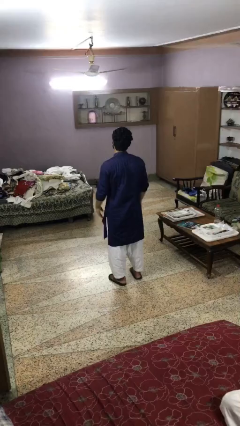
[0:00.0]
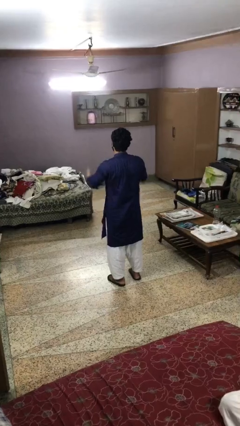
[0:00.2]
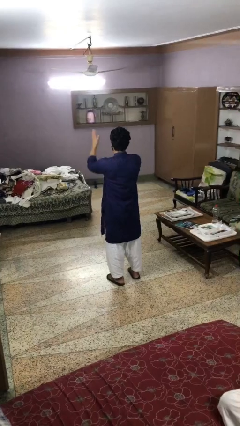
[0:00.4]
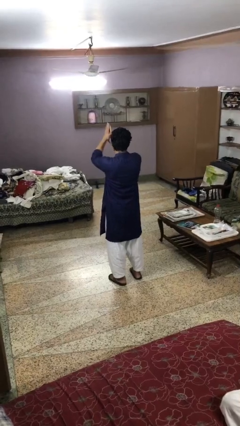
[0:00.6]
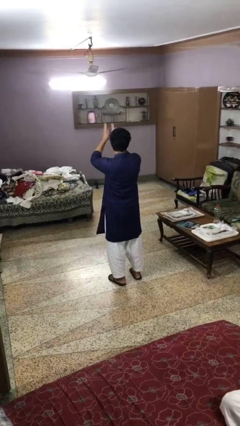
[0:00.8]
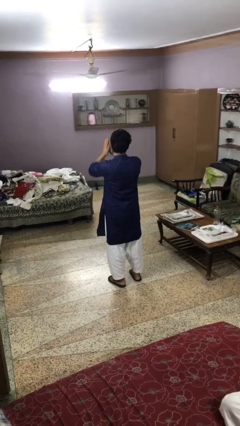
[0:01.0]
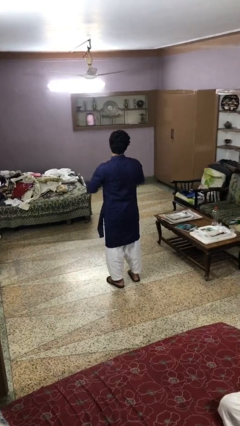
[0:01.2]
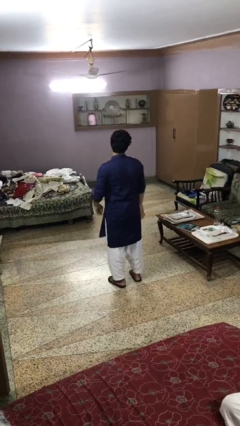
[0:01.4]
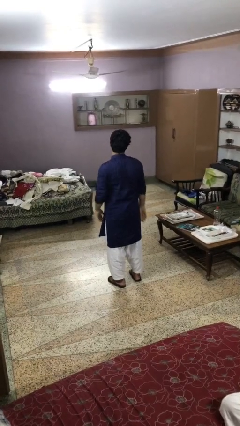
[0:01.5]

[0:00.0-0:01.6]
person claps hands

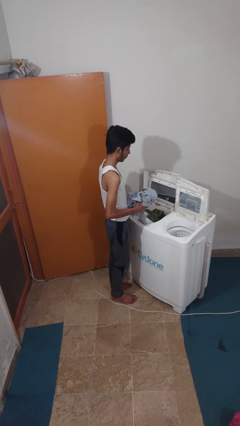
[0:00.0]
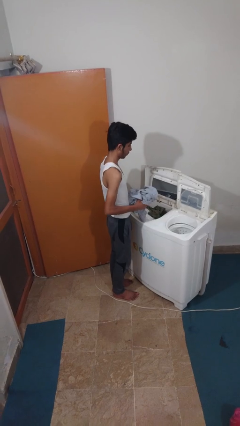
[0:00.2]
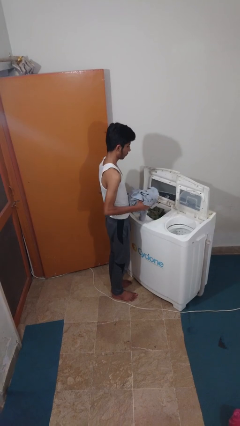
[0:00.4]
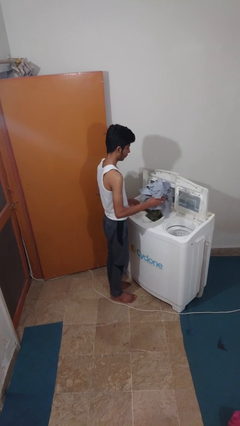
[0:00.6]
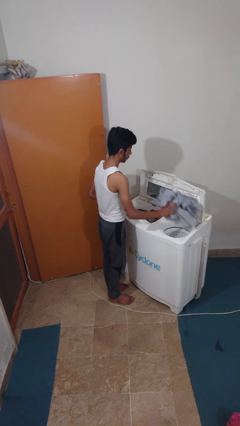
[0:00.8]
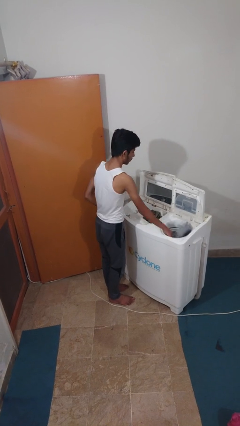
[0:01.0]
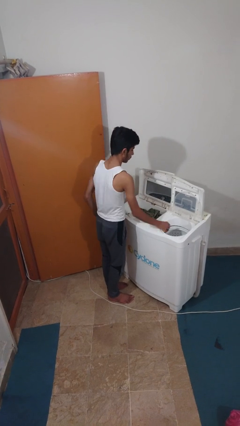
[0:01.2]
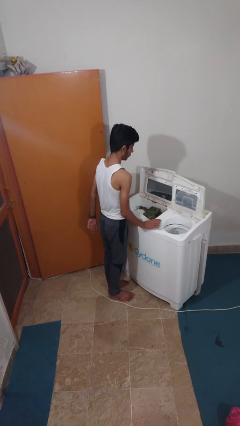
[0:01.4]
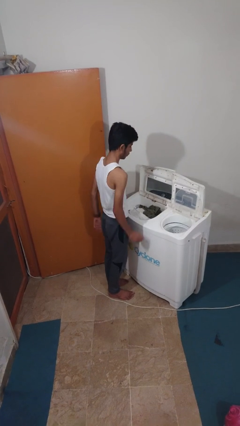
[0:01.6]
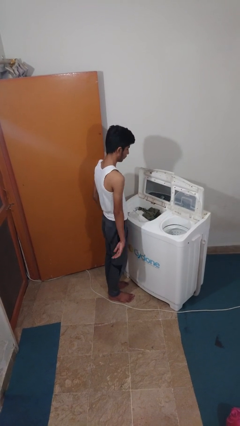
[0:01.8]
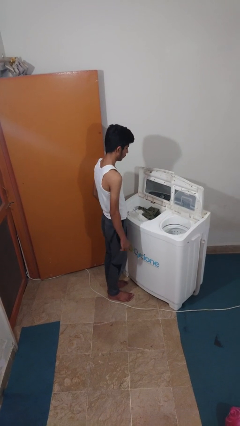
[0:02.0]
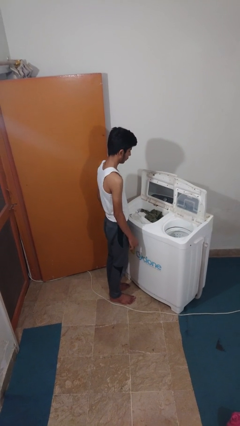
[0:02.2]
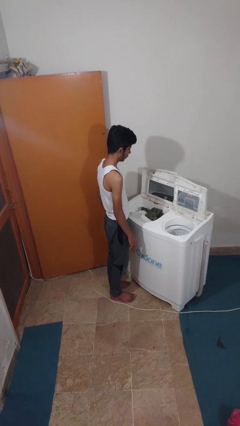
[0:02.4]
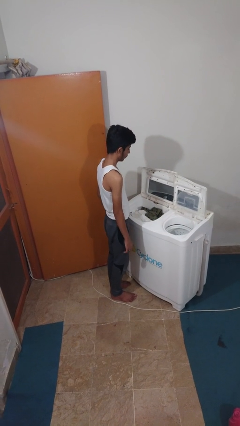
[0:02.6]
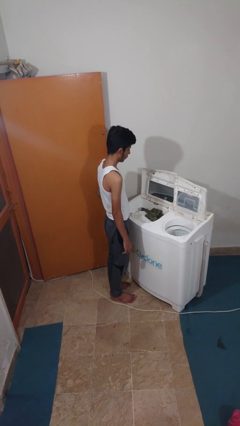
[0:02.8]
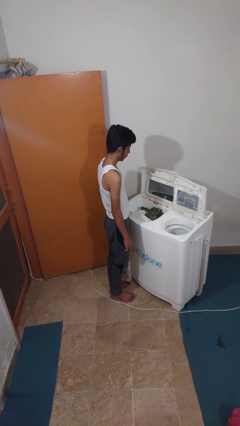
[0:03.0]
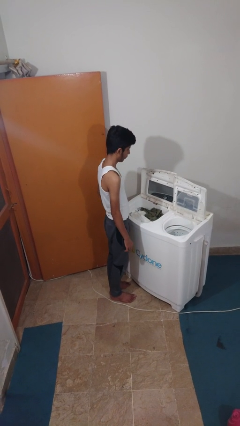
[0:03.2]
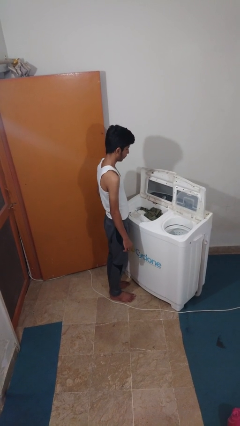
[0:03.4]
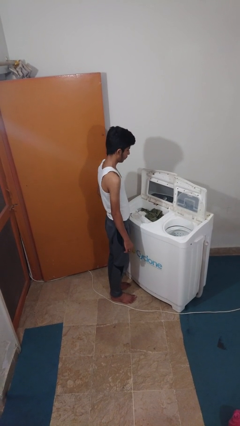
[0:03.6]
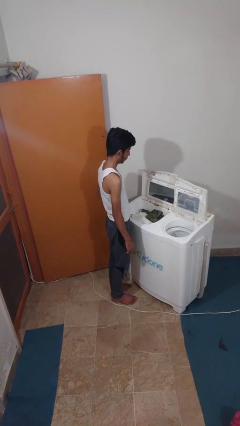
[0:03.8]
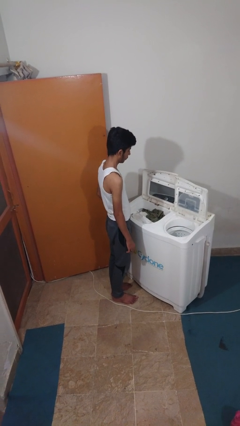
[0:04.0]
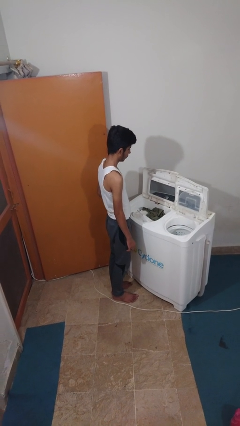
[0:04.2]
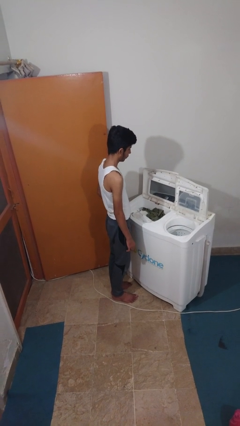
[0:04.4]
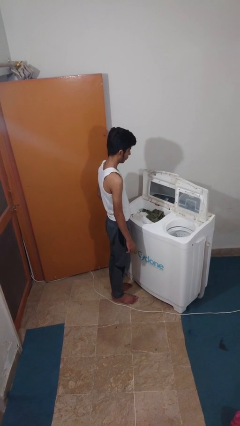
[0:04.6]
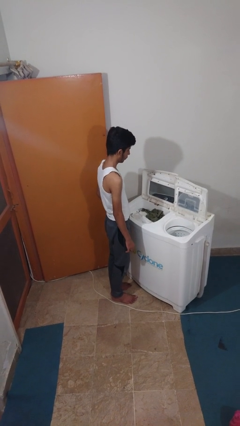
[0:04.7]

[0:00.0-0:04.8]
person loads dryer

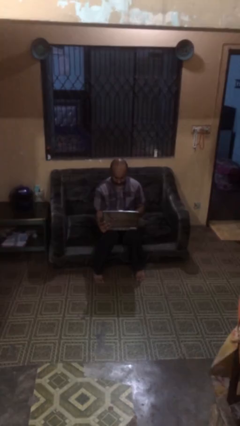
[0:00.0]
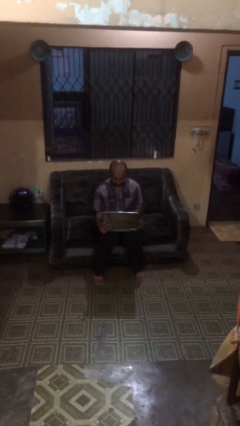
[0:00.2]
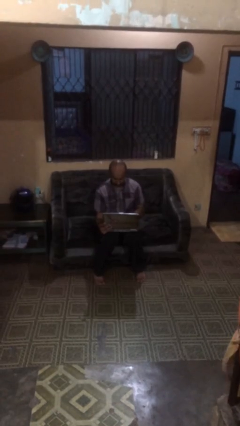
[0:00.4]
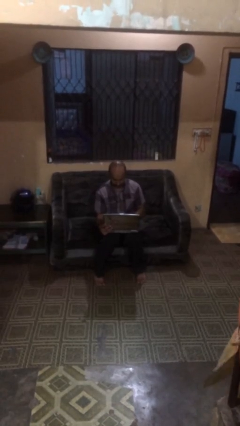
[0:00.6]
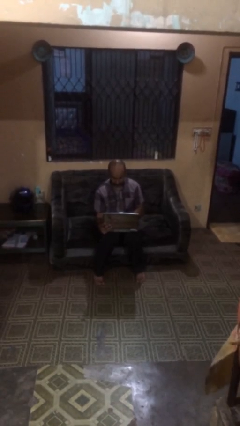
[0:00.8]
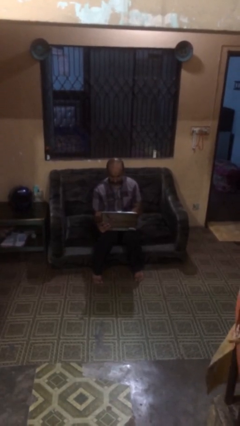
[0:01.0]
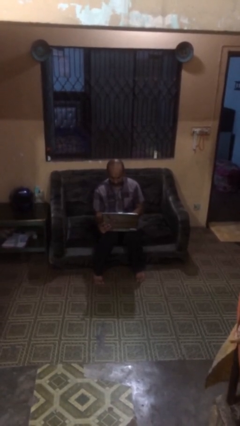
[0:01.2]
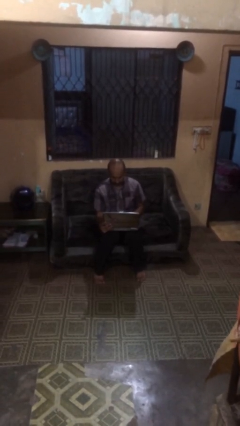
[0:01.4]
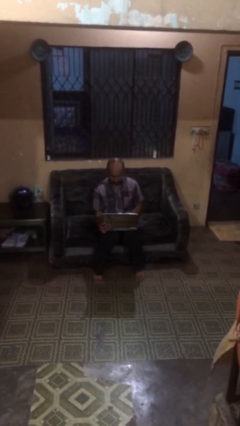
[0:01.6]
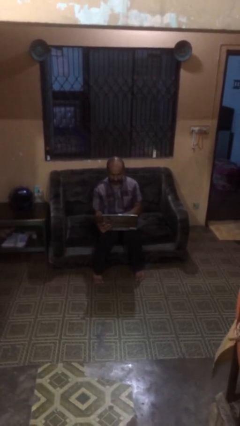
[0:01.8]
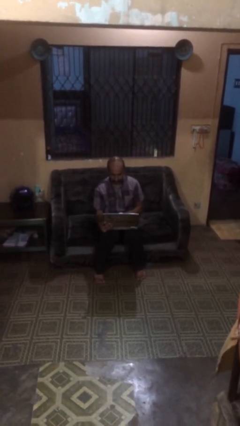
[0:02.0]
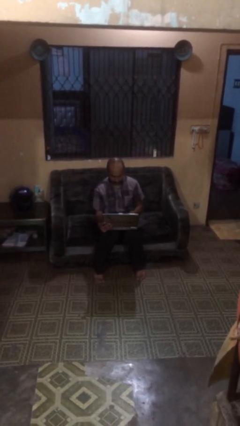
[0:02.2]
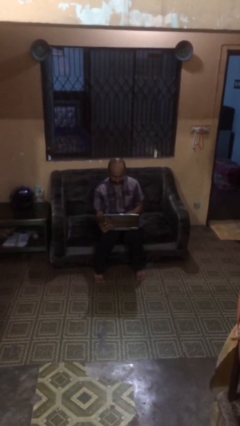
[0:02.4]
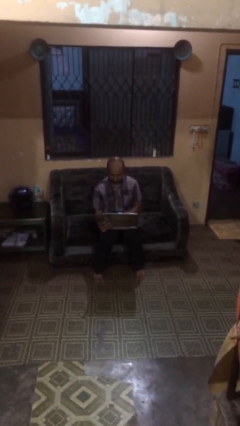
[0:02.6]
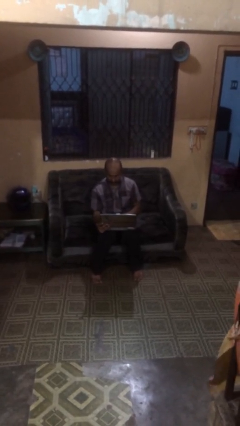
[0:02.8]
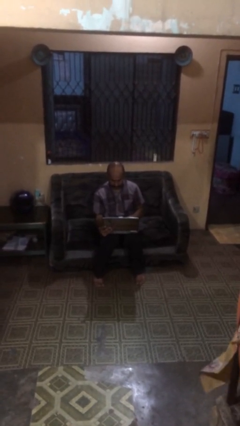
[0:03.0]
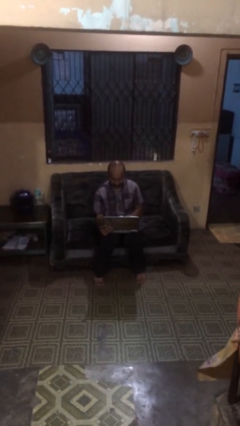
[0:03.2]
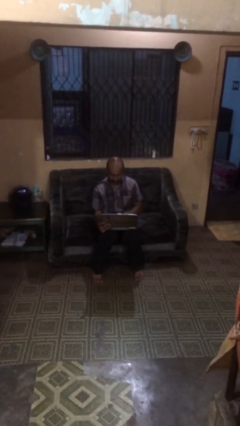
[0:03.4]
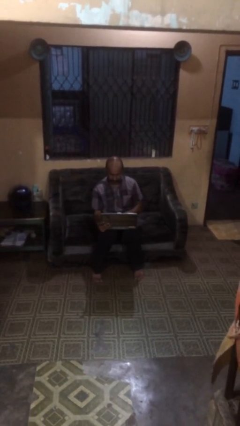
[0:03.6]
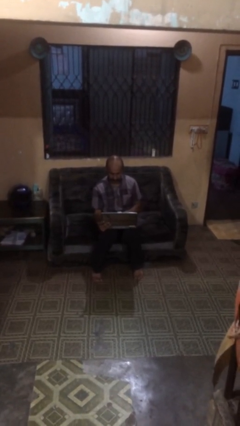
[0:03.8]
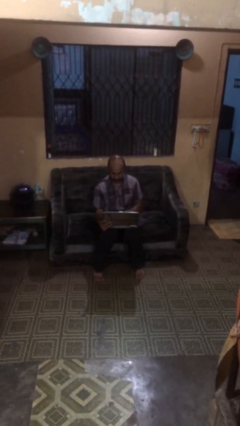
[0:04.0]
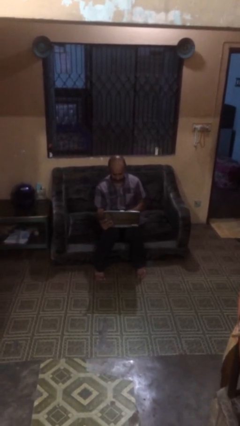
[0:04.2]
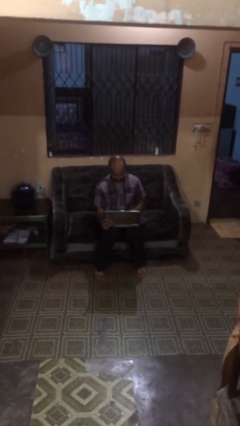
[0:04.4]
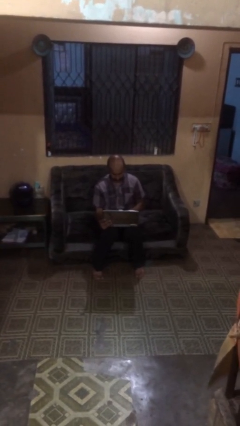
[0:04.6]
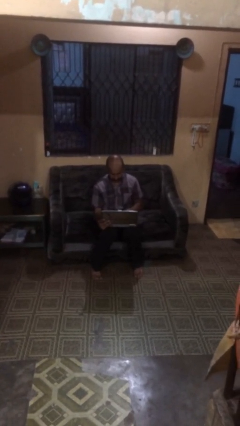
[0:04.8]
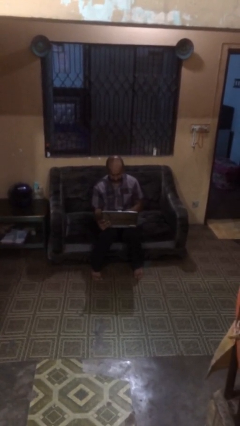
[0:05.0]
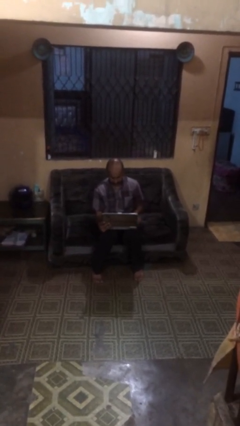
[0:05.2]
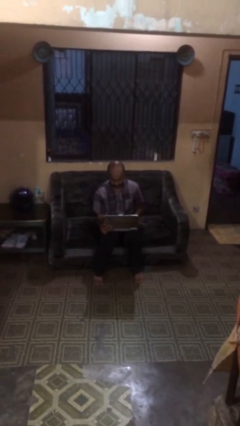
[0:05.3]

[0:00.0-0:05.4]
person interacts with laptop

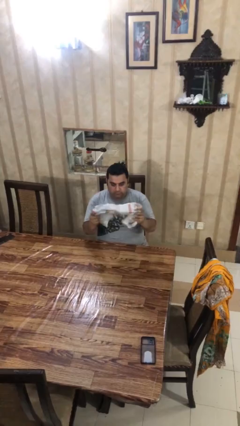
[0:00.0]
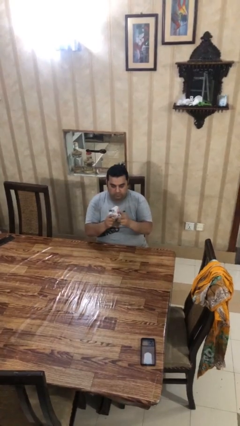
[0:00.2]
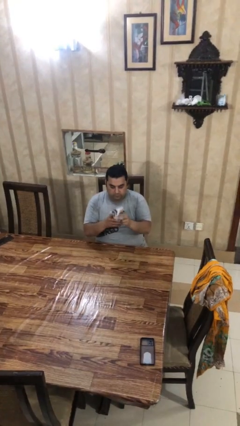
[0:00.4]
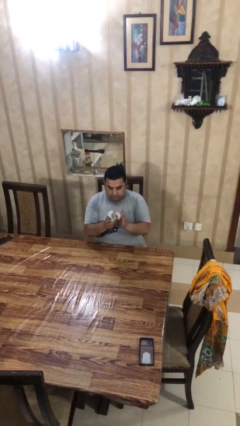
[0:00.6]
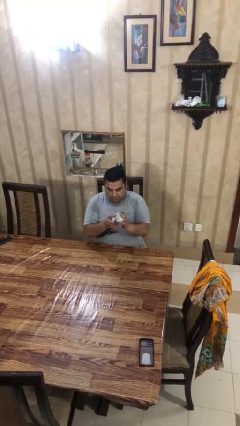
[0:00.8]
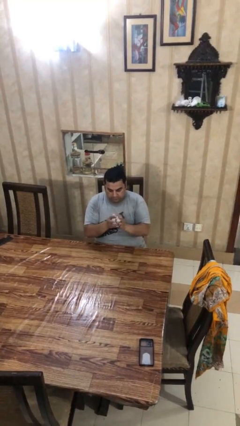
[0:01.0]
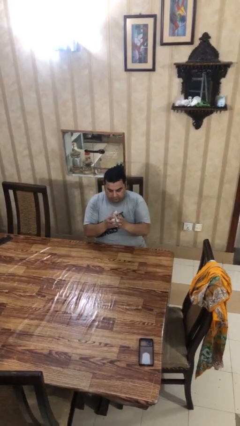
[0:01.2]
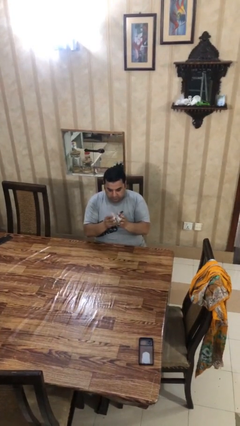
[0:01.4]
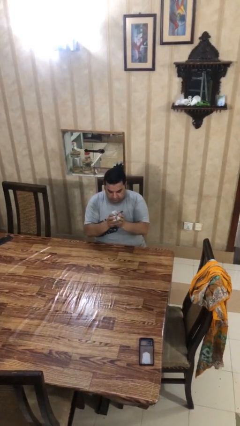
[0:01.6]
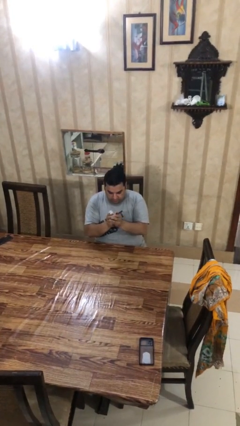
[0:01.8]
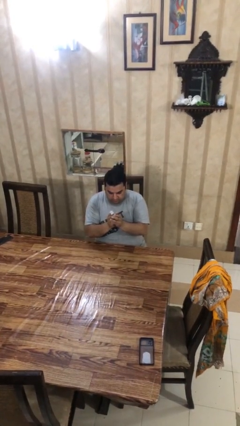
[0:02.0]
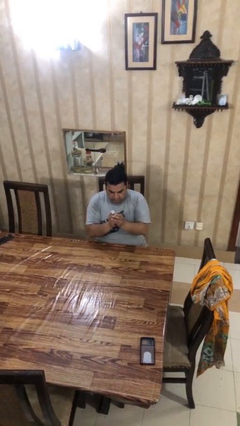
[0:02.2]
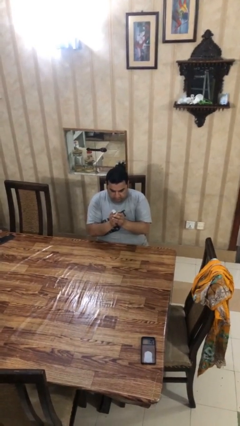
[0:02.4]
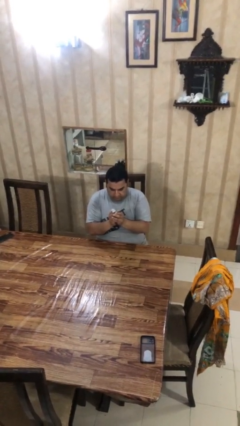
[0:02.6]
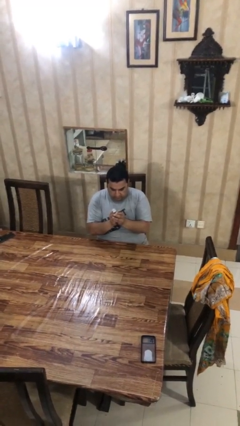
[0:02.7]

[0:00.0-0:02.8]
person crumples paper

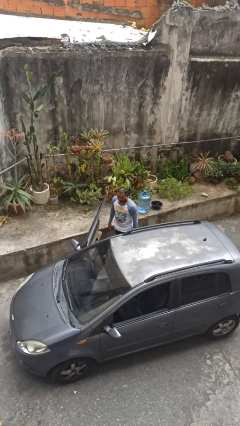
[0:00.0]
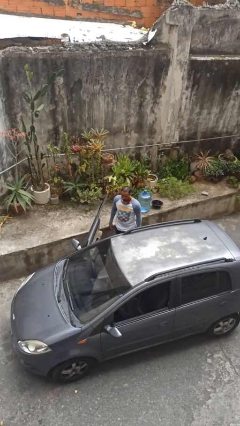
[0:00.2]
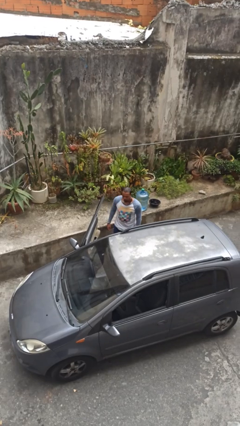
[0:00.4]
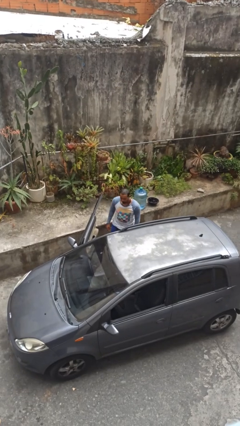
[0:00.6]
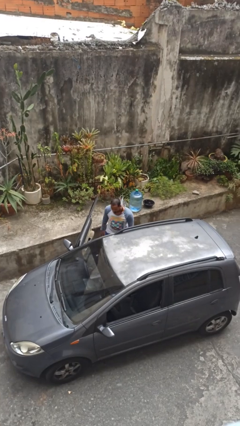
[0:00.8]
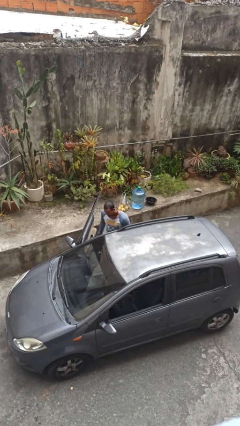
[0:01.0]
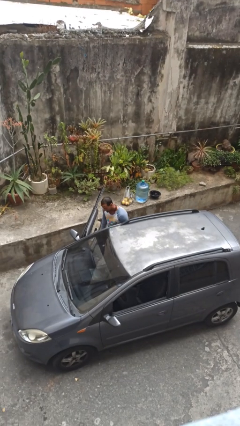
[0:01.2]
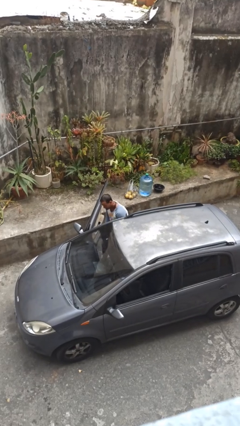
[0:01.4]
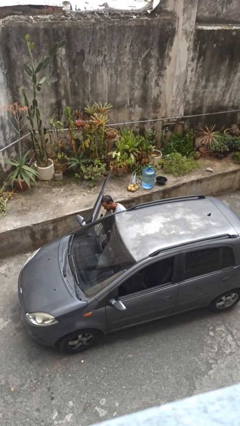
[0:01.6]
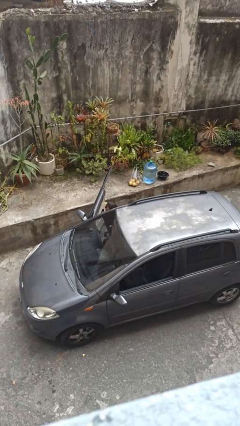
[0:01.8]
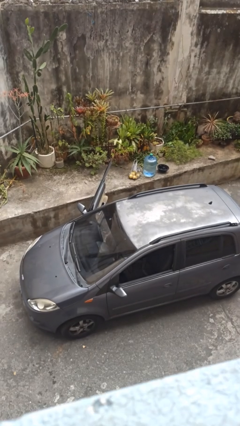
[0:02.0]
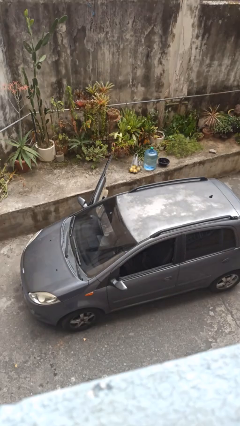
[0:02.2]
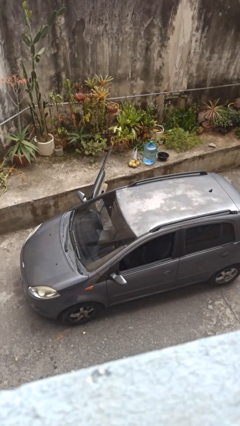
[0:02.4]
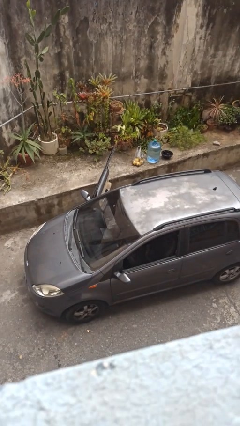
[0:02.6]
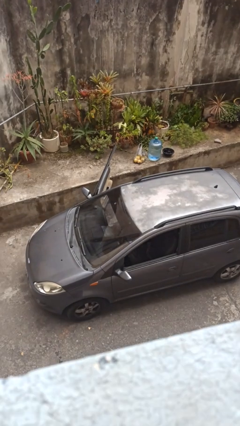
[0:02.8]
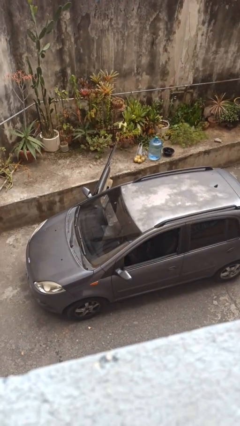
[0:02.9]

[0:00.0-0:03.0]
person enters car
